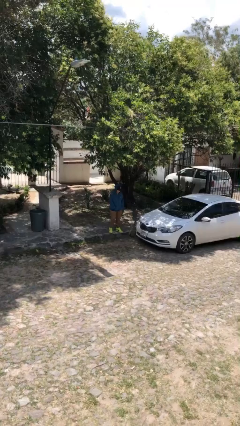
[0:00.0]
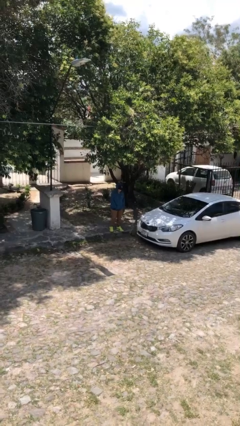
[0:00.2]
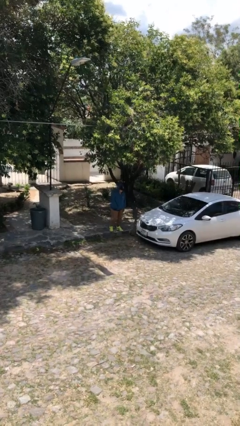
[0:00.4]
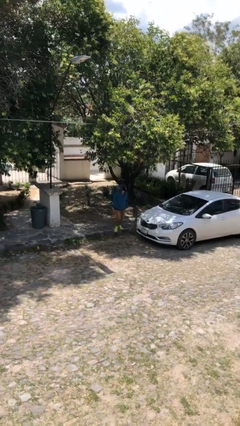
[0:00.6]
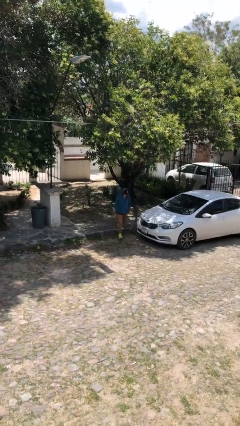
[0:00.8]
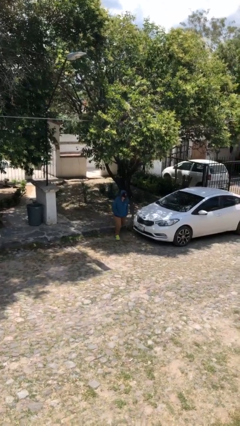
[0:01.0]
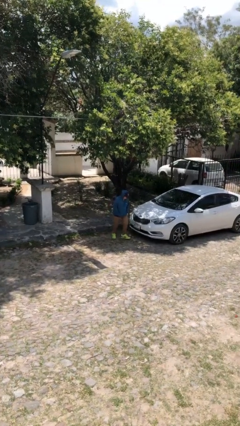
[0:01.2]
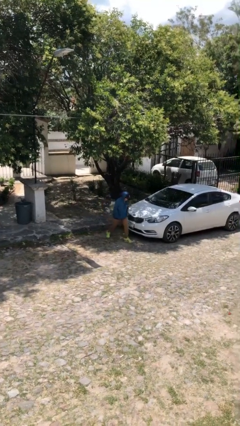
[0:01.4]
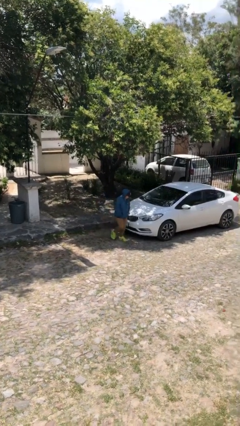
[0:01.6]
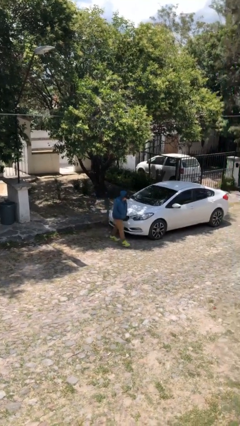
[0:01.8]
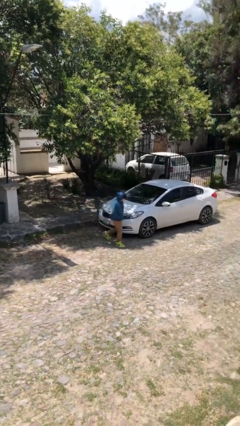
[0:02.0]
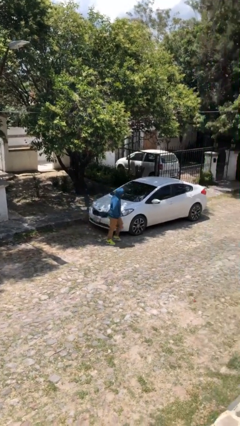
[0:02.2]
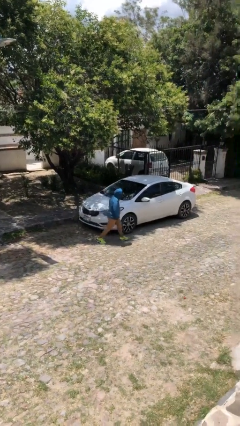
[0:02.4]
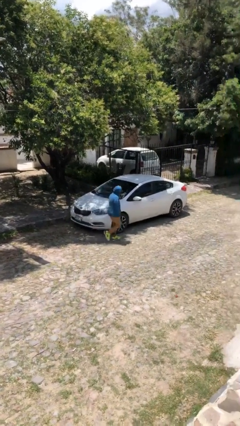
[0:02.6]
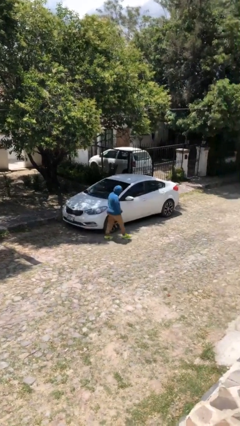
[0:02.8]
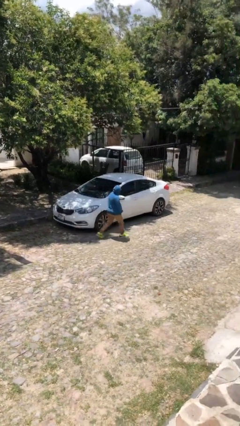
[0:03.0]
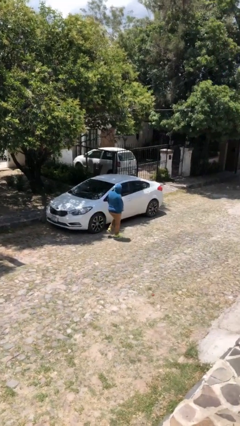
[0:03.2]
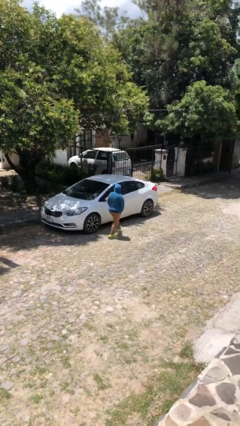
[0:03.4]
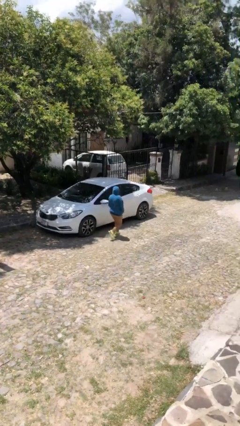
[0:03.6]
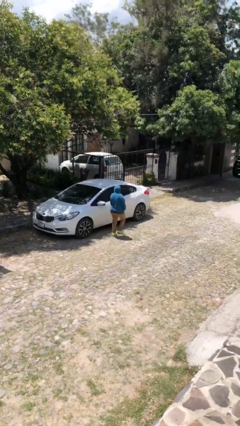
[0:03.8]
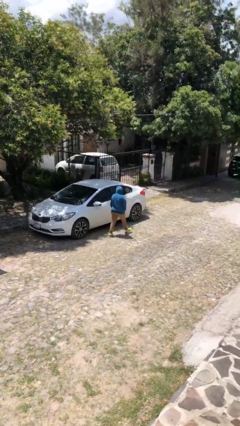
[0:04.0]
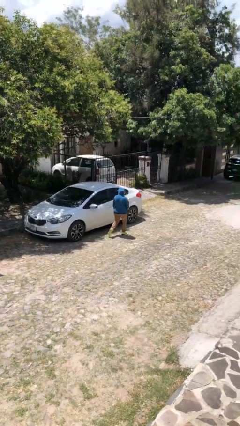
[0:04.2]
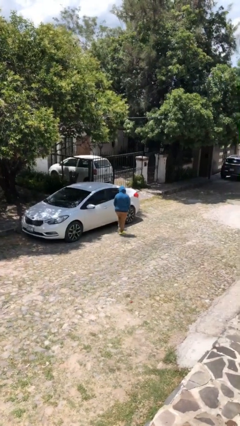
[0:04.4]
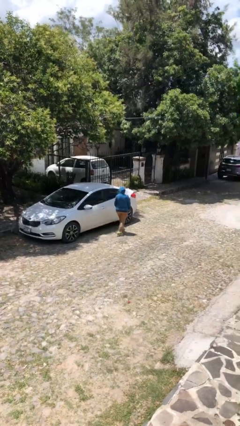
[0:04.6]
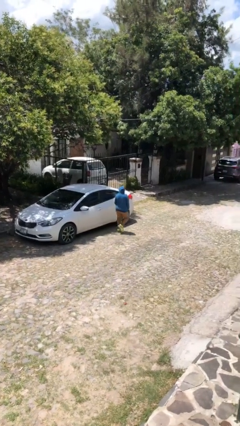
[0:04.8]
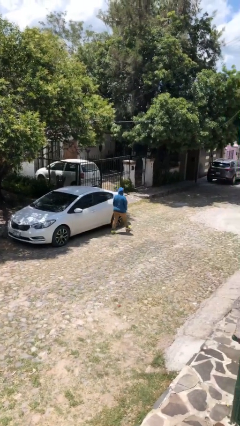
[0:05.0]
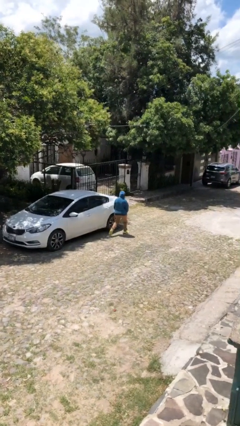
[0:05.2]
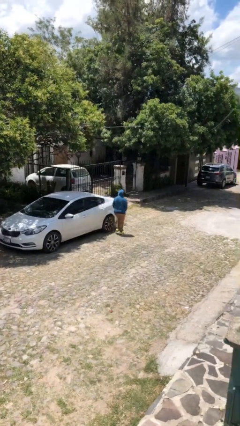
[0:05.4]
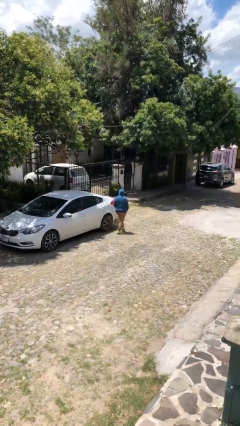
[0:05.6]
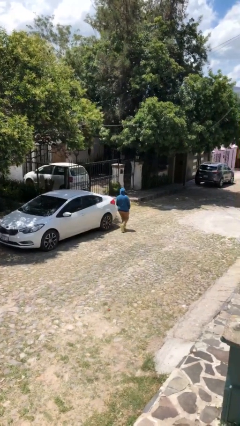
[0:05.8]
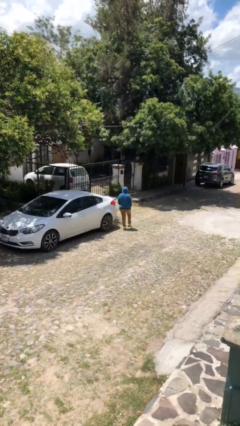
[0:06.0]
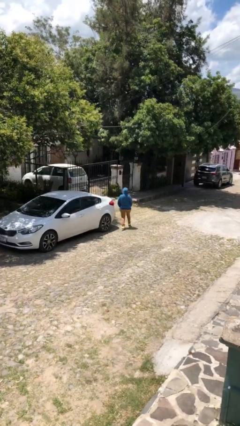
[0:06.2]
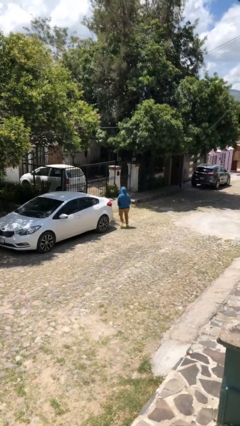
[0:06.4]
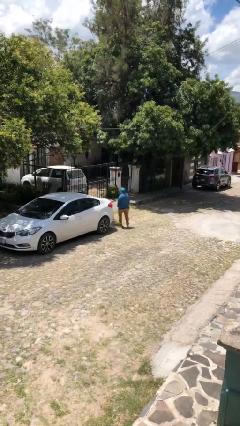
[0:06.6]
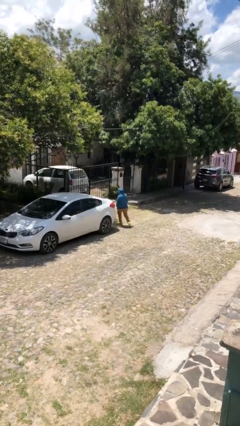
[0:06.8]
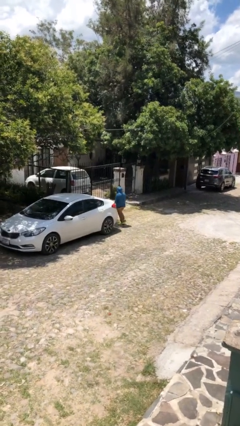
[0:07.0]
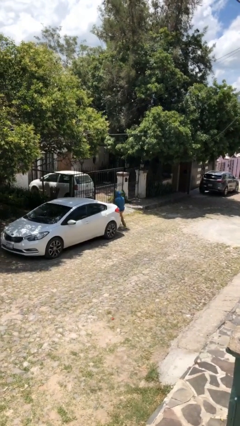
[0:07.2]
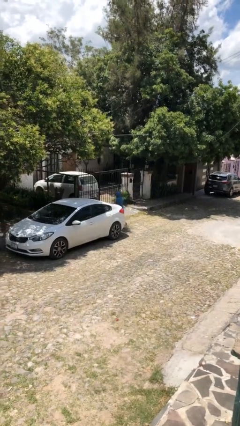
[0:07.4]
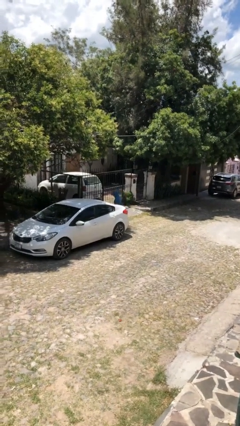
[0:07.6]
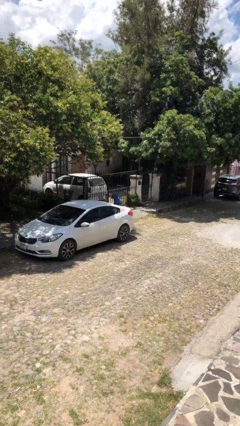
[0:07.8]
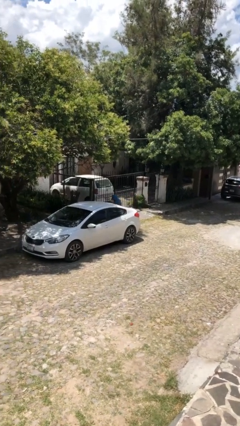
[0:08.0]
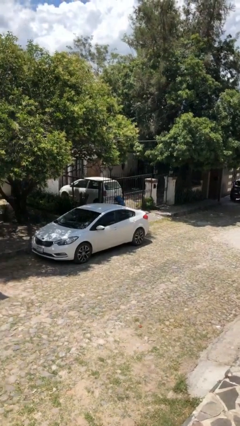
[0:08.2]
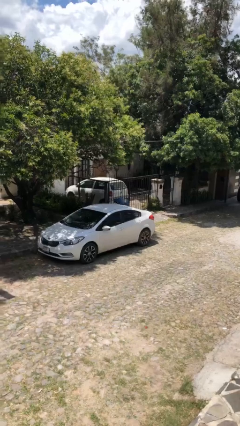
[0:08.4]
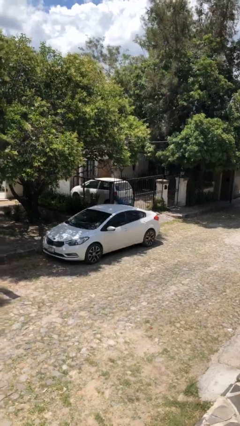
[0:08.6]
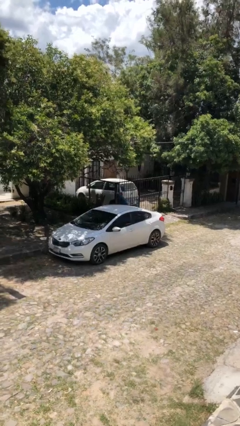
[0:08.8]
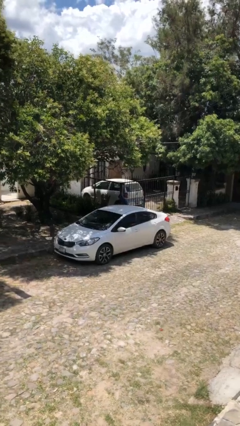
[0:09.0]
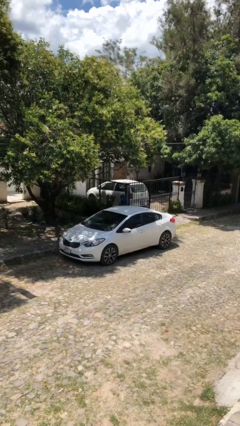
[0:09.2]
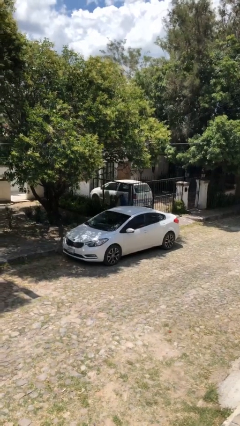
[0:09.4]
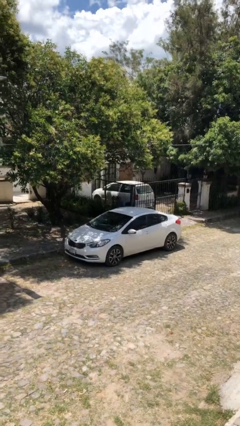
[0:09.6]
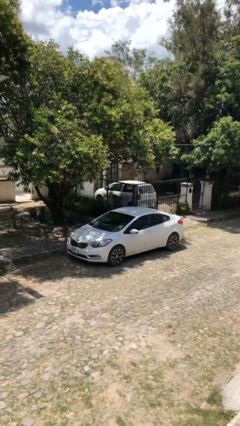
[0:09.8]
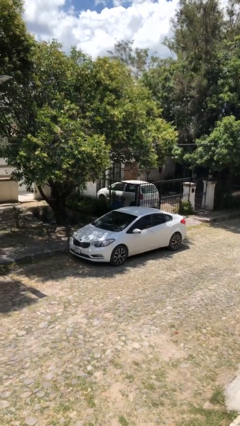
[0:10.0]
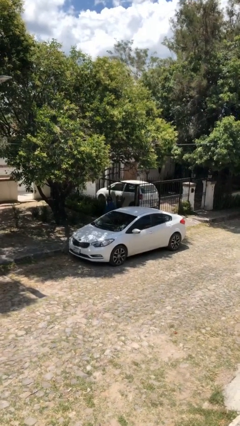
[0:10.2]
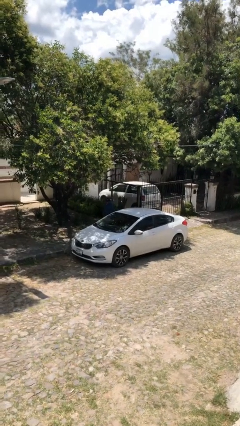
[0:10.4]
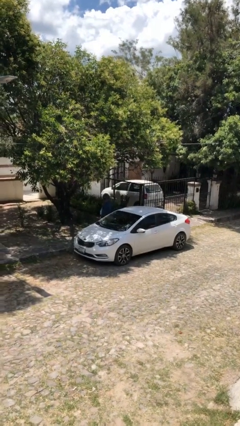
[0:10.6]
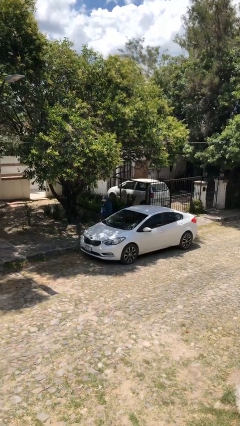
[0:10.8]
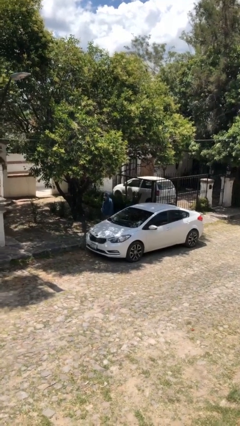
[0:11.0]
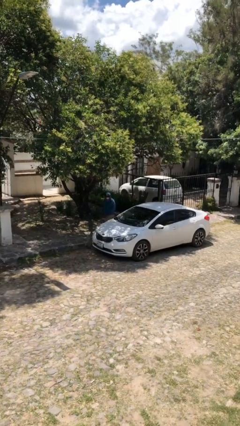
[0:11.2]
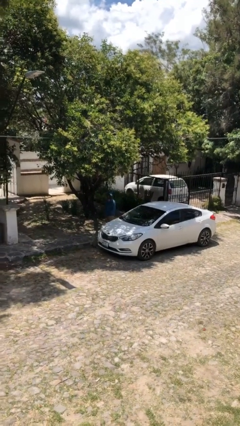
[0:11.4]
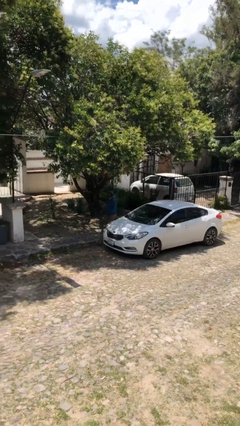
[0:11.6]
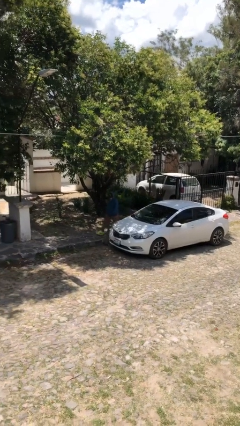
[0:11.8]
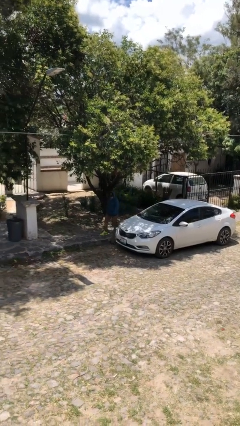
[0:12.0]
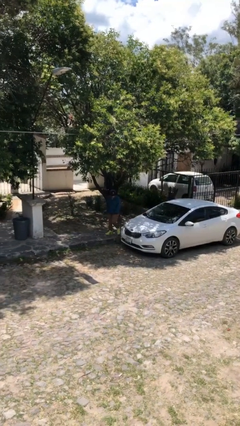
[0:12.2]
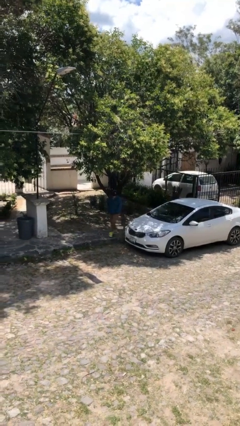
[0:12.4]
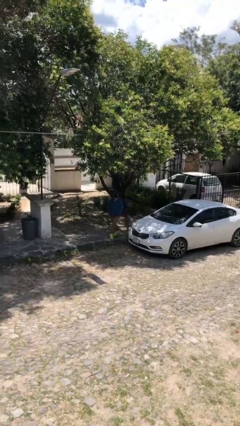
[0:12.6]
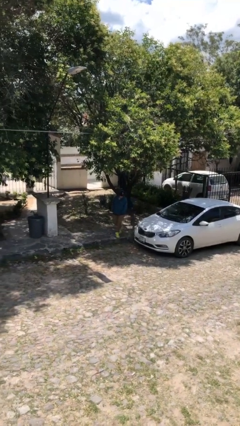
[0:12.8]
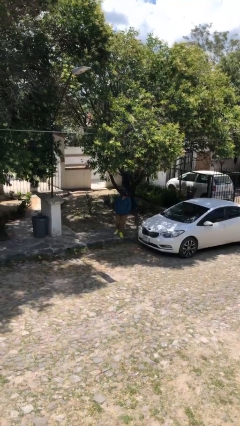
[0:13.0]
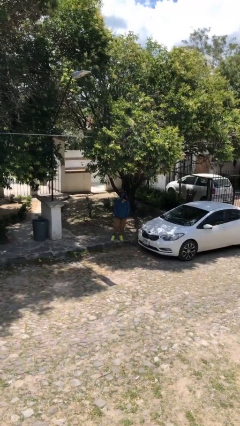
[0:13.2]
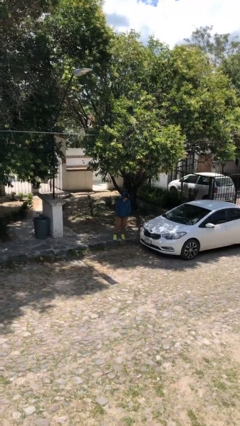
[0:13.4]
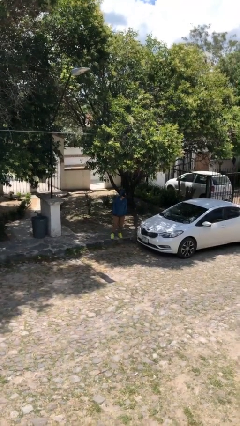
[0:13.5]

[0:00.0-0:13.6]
person walks around car

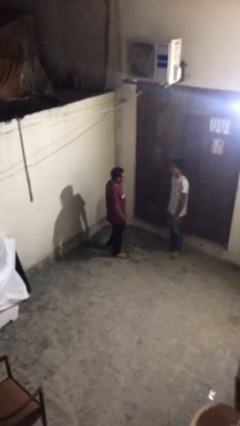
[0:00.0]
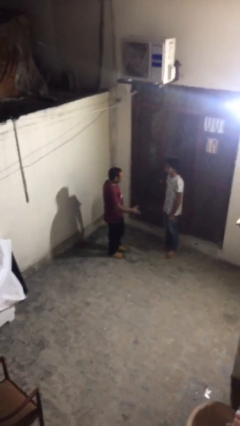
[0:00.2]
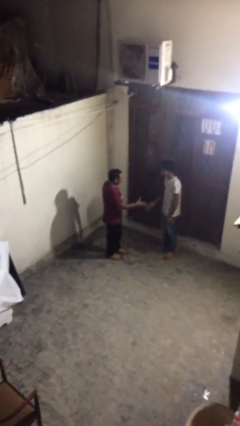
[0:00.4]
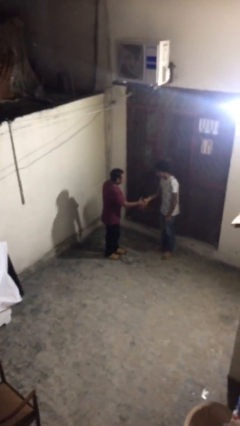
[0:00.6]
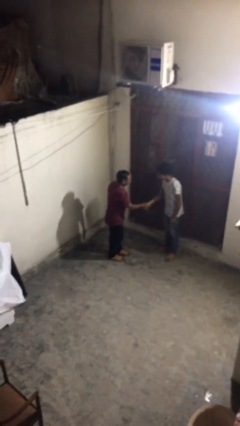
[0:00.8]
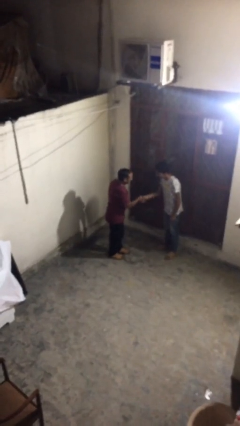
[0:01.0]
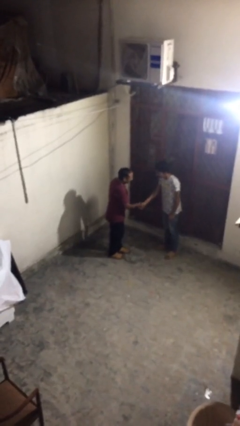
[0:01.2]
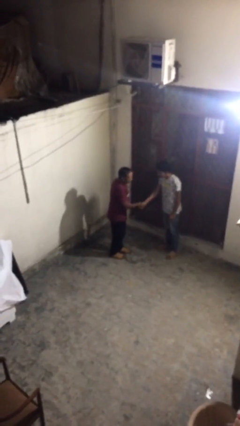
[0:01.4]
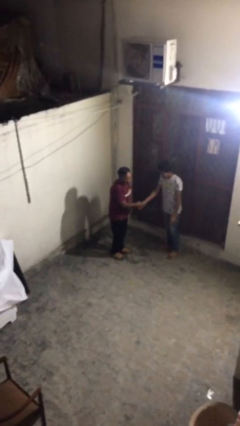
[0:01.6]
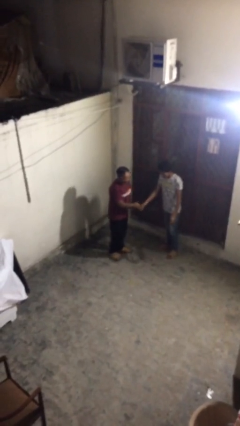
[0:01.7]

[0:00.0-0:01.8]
person shakes hand

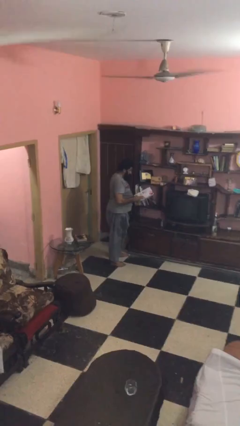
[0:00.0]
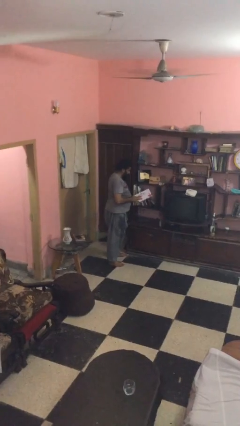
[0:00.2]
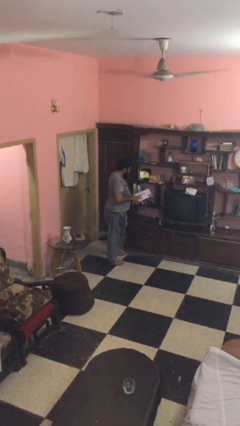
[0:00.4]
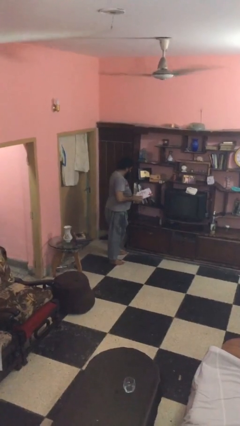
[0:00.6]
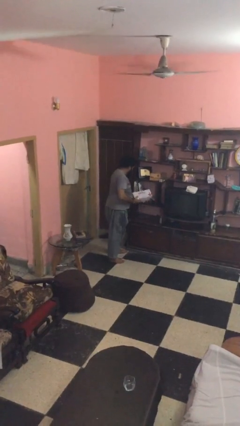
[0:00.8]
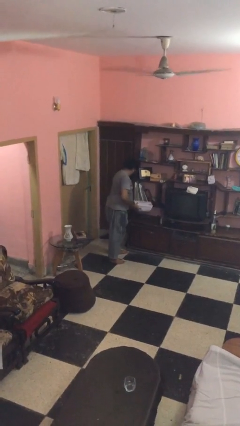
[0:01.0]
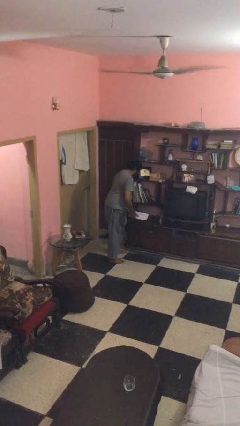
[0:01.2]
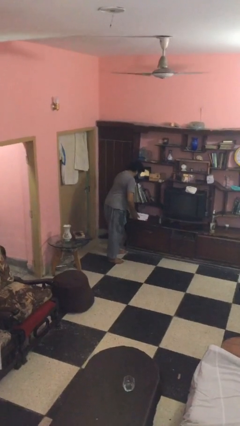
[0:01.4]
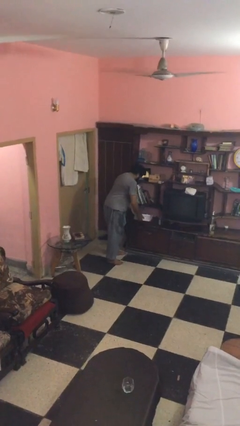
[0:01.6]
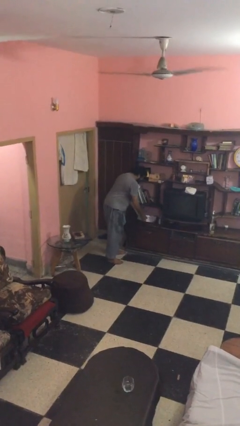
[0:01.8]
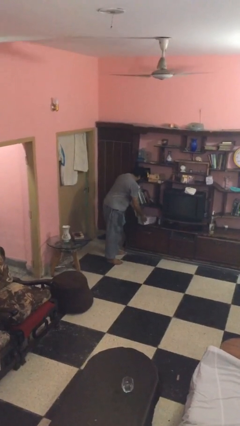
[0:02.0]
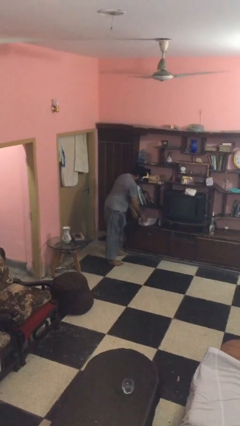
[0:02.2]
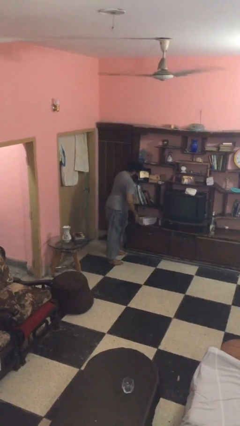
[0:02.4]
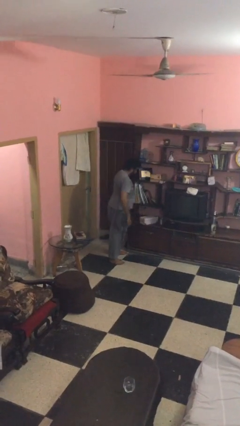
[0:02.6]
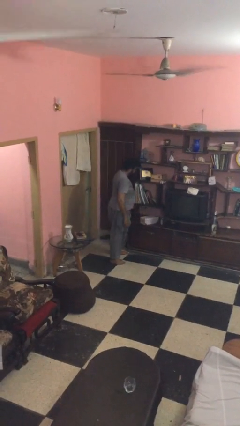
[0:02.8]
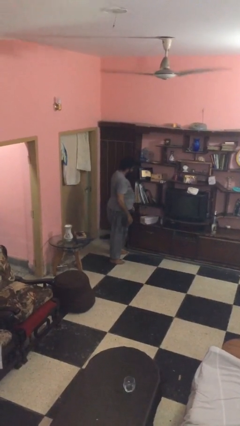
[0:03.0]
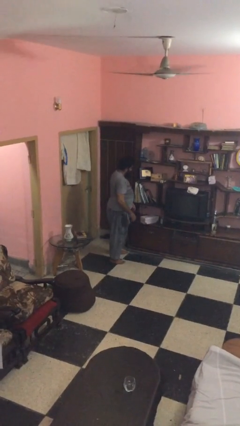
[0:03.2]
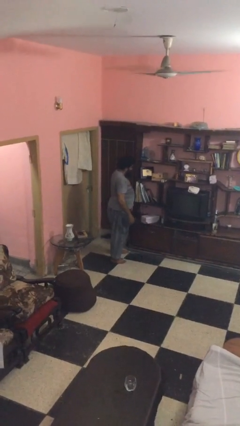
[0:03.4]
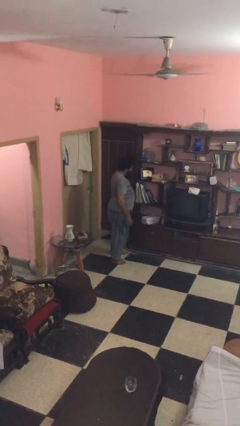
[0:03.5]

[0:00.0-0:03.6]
person puts down object on table
